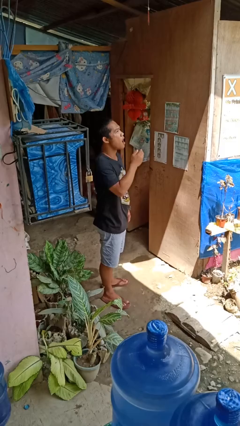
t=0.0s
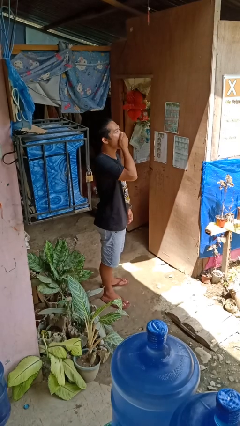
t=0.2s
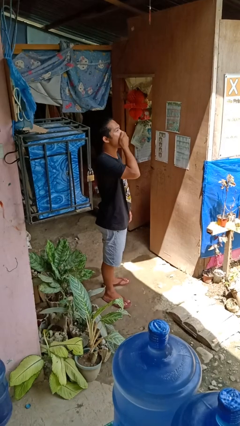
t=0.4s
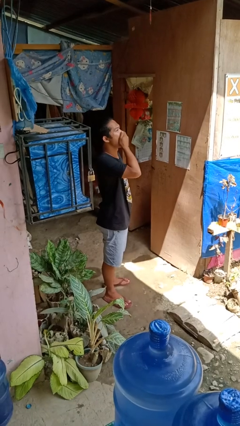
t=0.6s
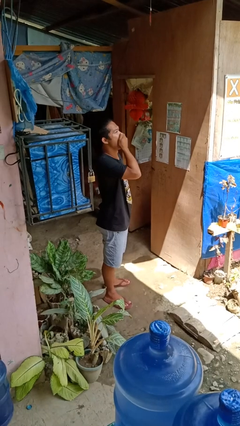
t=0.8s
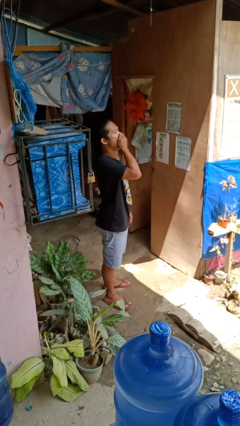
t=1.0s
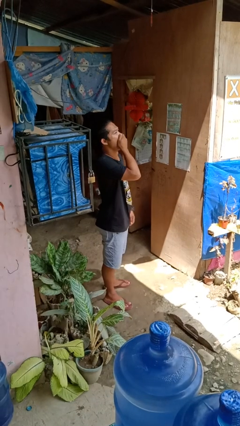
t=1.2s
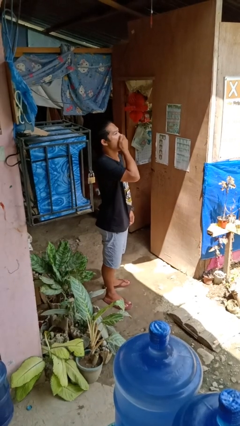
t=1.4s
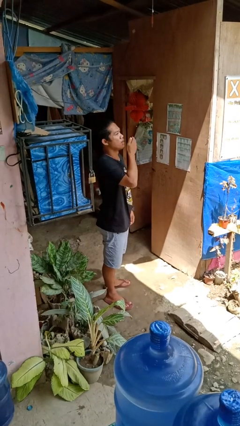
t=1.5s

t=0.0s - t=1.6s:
person yawns

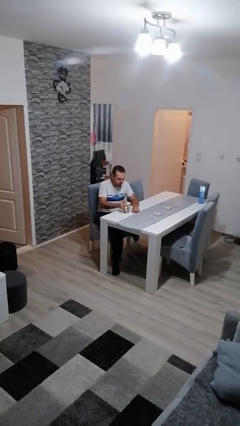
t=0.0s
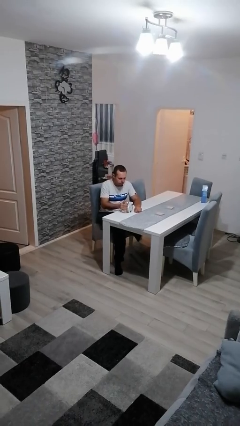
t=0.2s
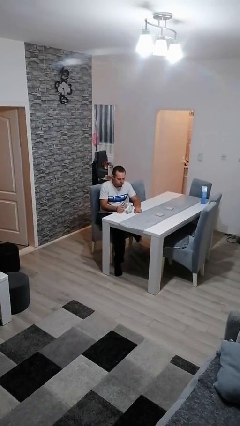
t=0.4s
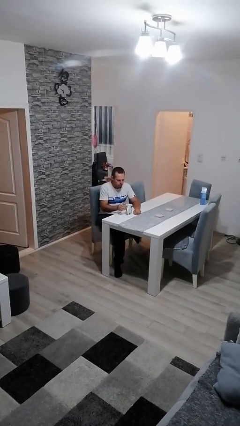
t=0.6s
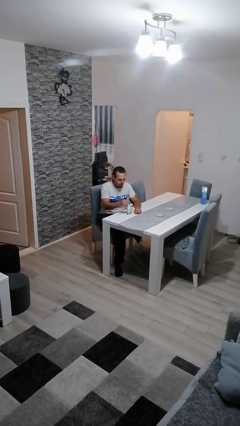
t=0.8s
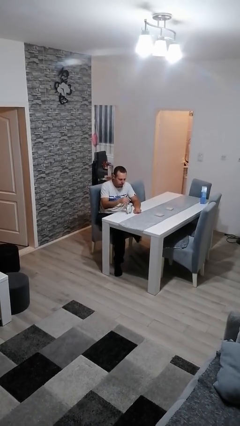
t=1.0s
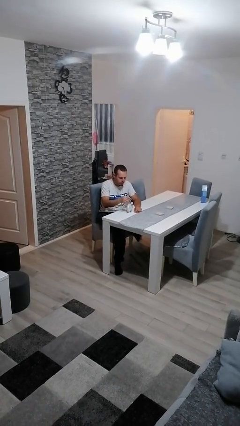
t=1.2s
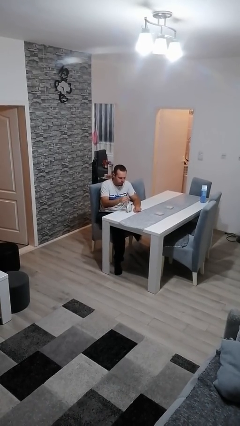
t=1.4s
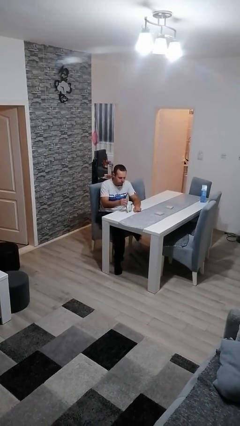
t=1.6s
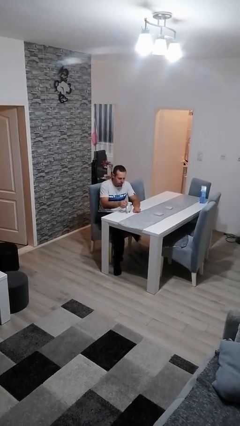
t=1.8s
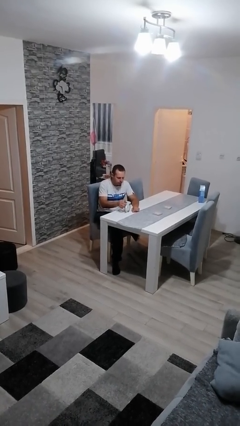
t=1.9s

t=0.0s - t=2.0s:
person stirs mug

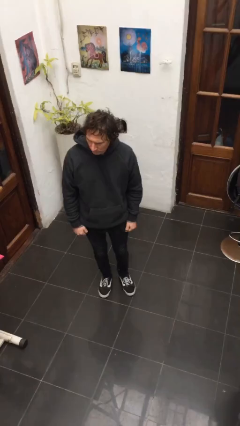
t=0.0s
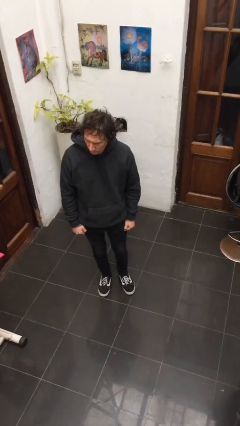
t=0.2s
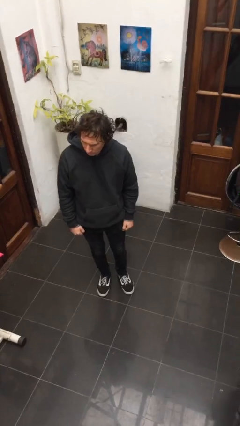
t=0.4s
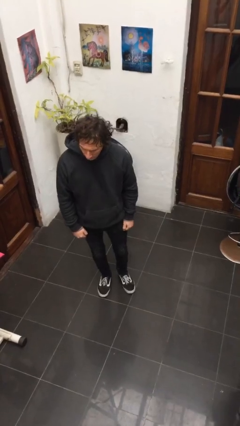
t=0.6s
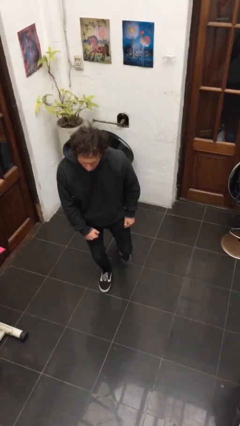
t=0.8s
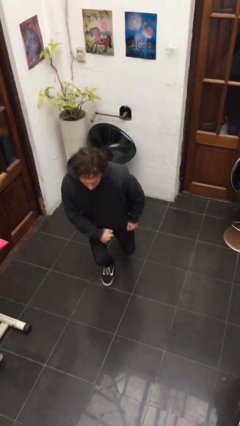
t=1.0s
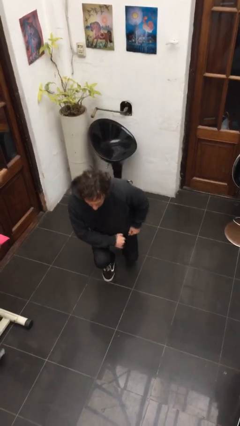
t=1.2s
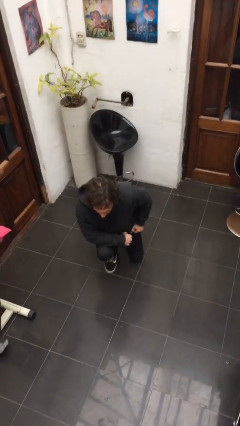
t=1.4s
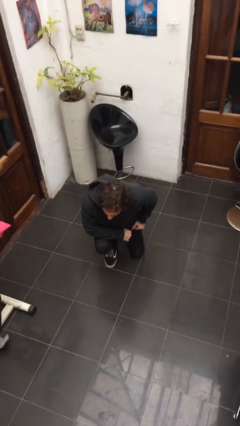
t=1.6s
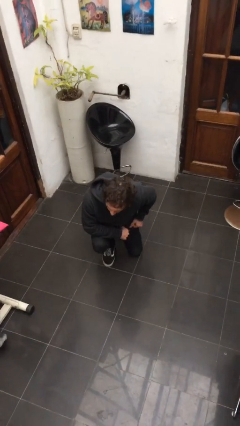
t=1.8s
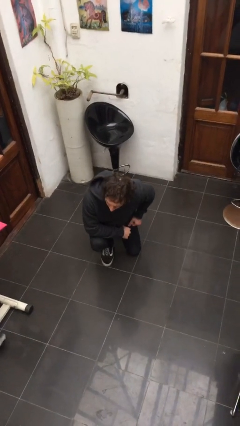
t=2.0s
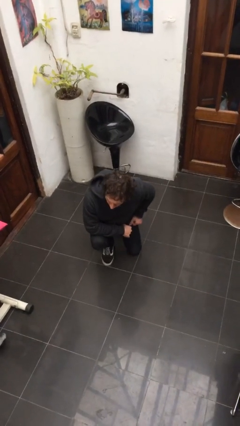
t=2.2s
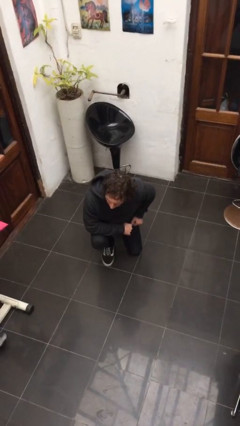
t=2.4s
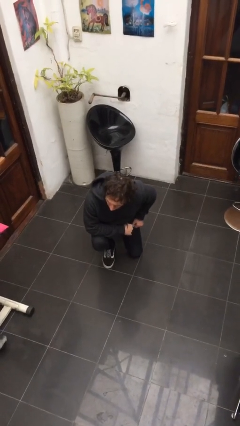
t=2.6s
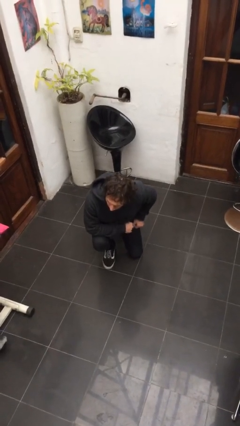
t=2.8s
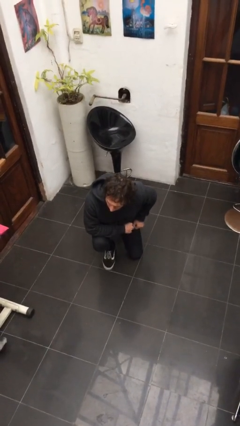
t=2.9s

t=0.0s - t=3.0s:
person kneels

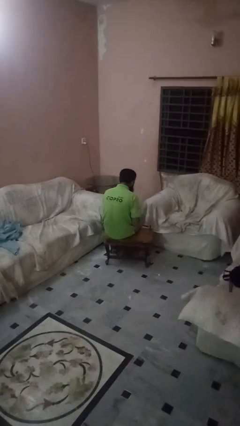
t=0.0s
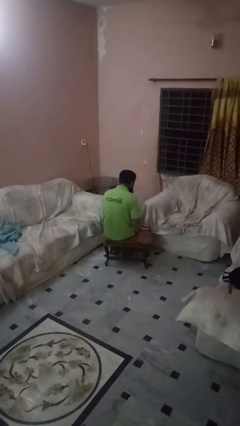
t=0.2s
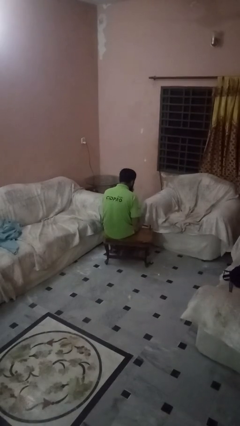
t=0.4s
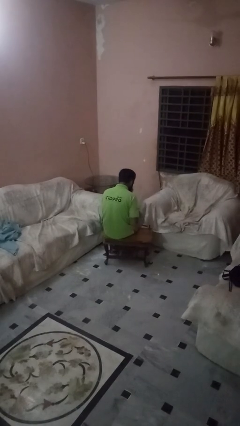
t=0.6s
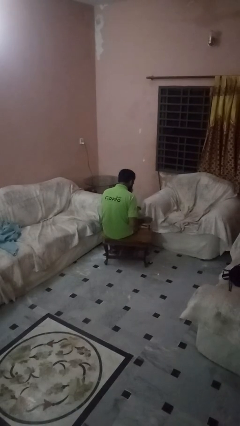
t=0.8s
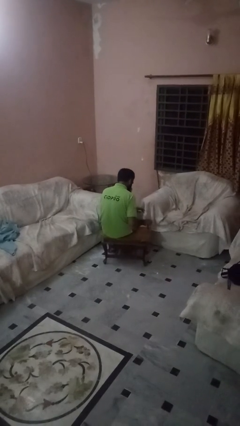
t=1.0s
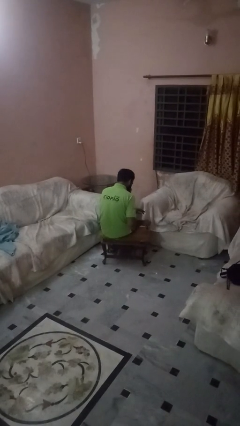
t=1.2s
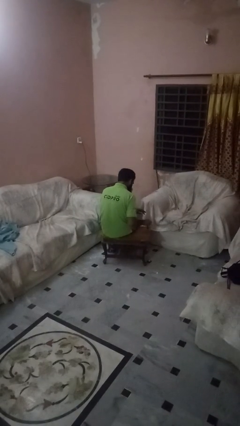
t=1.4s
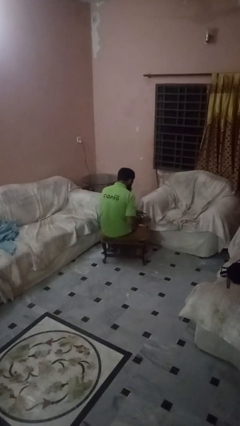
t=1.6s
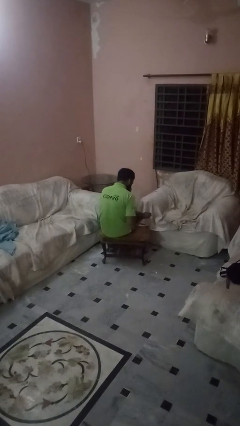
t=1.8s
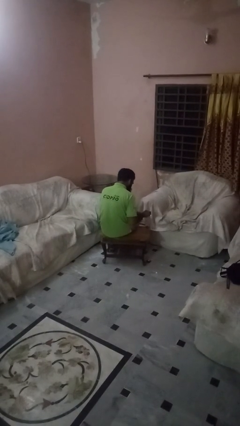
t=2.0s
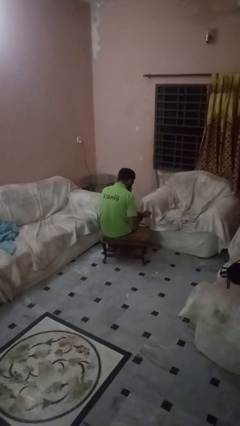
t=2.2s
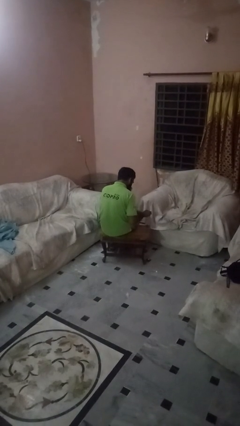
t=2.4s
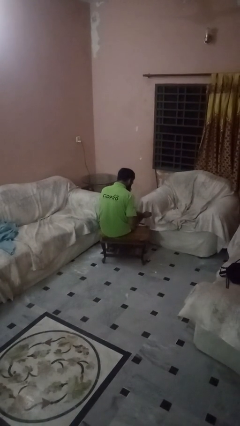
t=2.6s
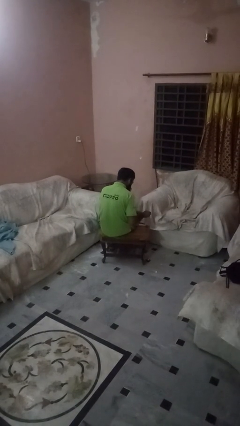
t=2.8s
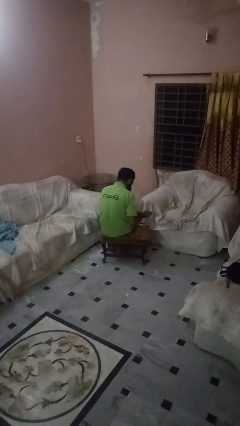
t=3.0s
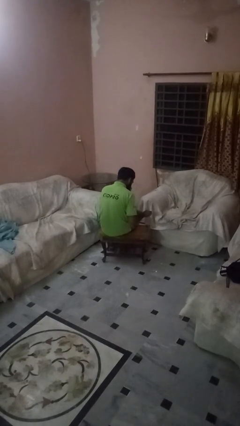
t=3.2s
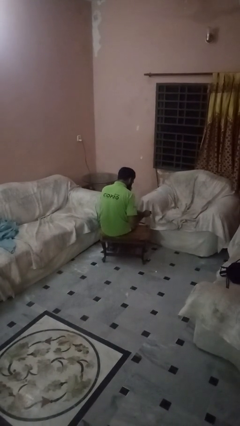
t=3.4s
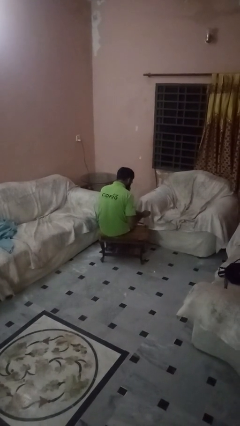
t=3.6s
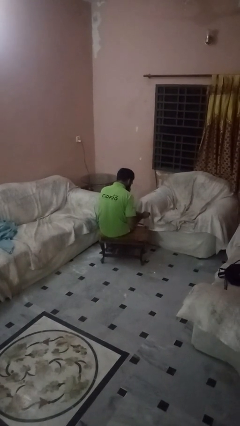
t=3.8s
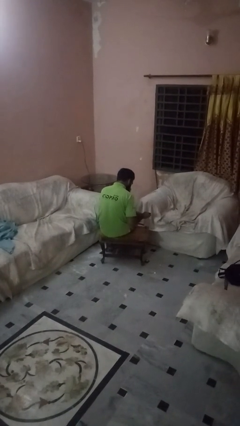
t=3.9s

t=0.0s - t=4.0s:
person paints fingernails

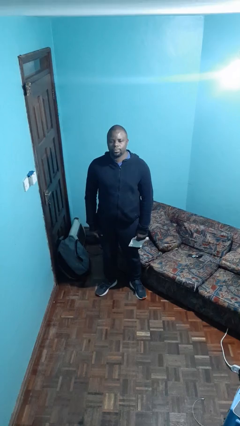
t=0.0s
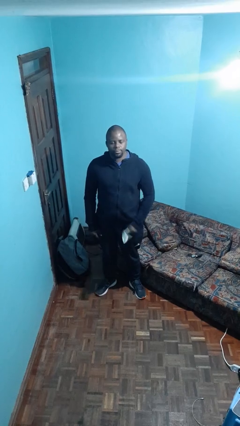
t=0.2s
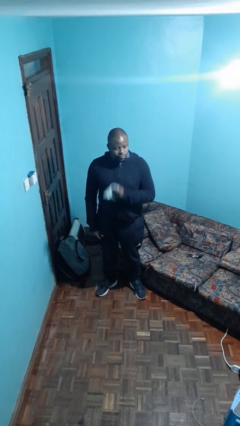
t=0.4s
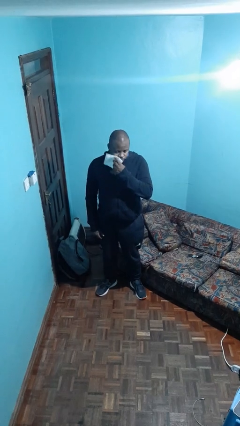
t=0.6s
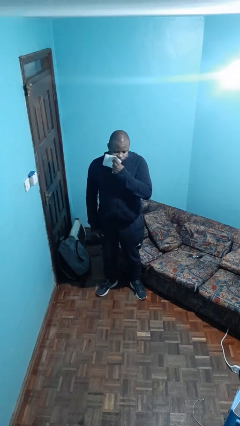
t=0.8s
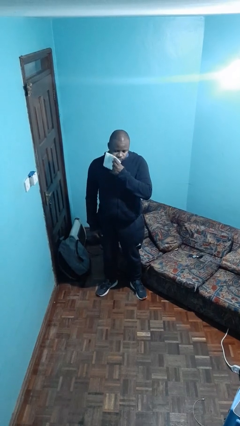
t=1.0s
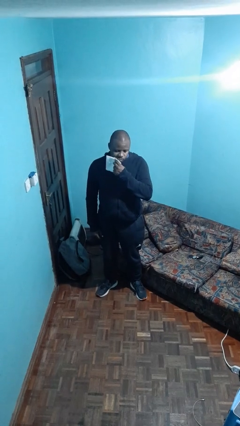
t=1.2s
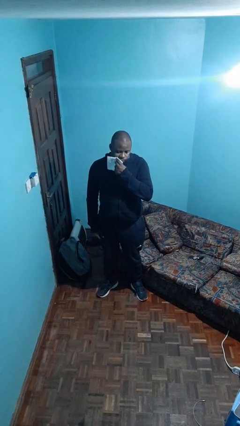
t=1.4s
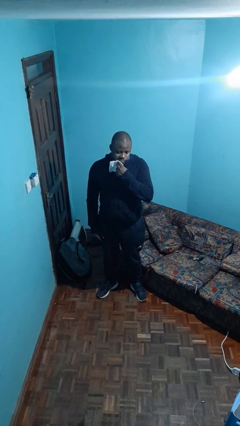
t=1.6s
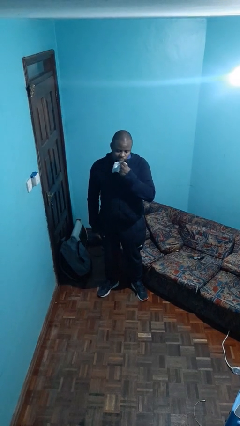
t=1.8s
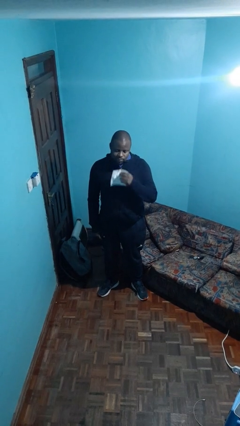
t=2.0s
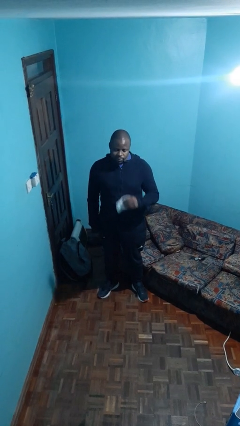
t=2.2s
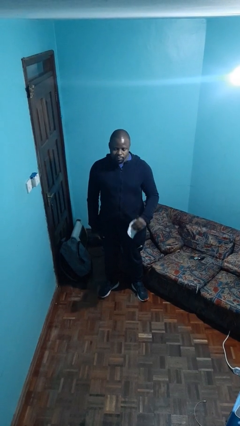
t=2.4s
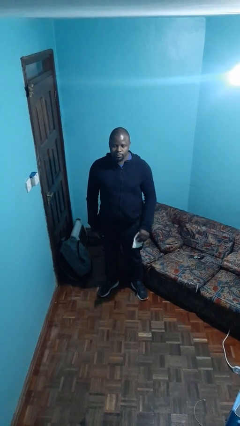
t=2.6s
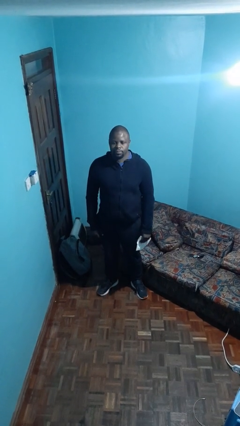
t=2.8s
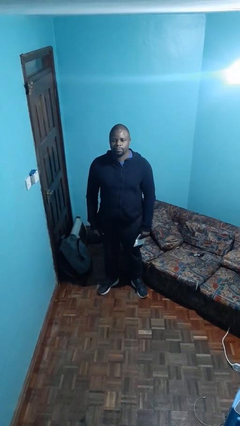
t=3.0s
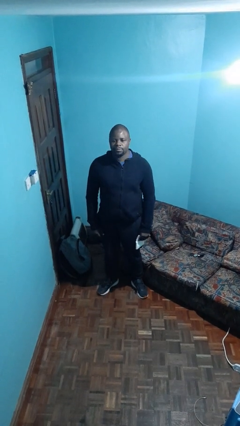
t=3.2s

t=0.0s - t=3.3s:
person wipes mouth with napkin

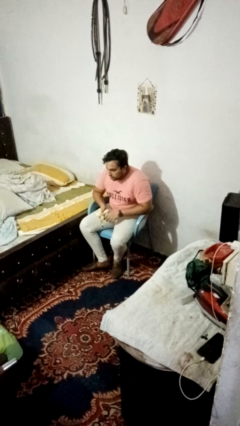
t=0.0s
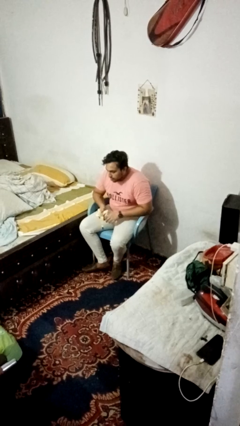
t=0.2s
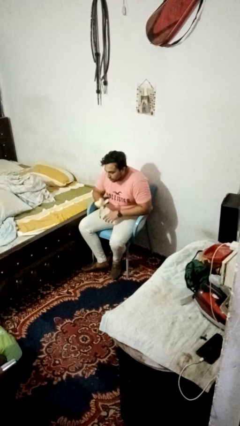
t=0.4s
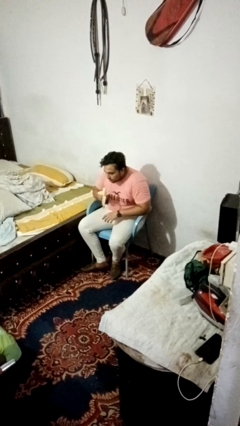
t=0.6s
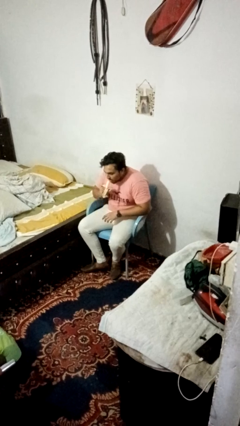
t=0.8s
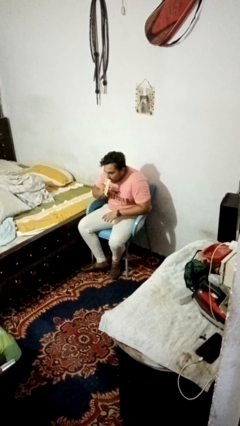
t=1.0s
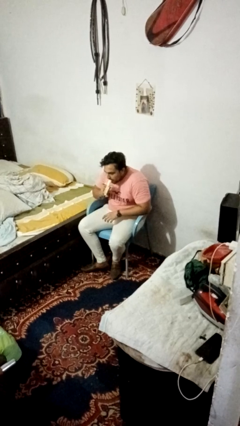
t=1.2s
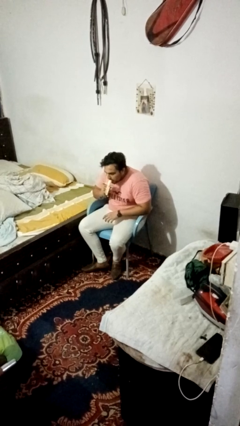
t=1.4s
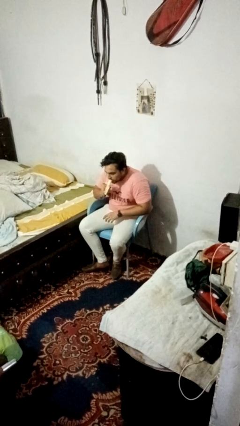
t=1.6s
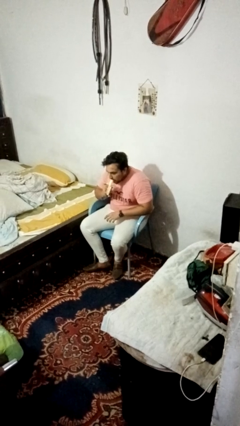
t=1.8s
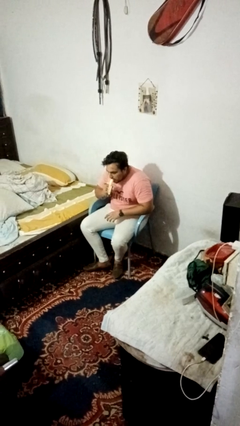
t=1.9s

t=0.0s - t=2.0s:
person eats banana

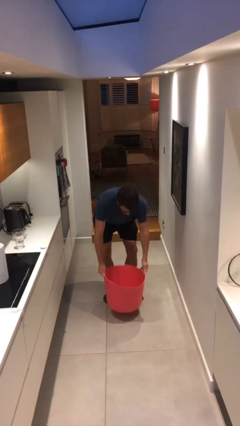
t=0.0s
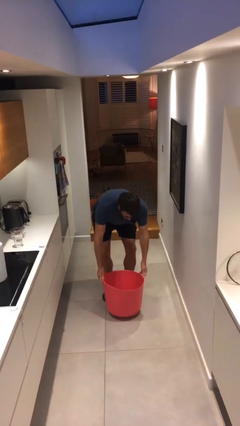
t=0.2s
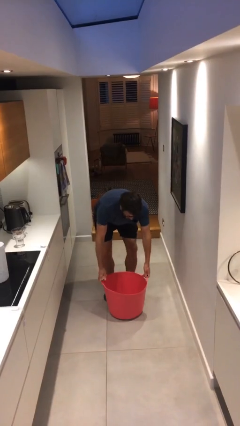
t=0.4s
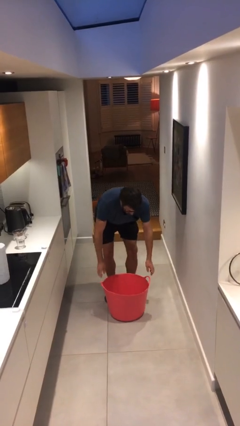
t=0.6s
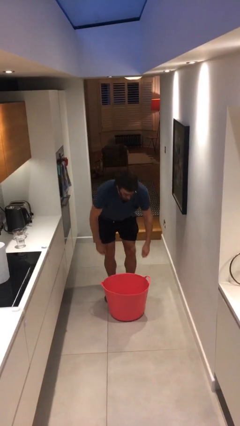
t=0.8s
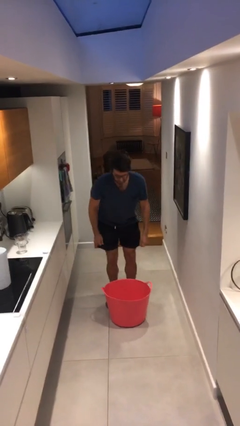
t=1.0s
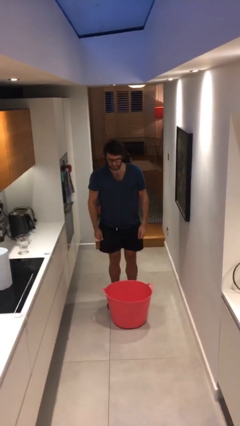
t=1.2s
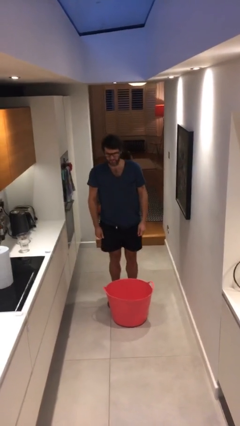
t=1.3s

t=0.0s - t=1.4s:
person puts down object on floor
